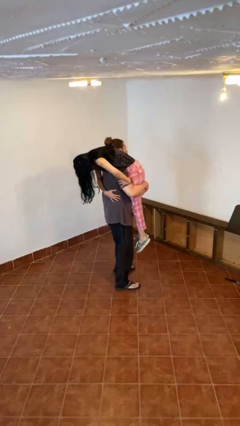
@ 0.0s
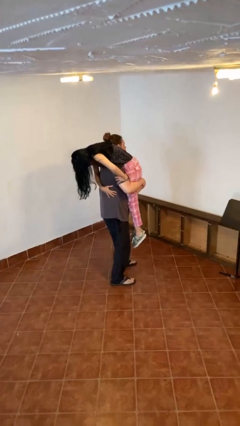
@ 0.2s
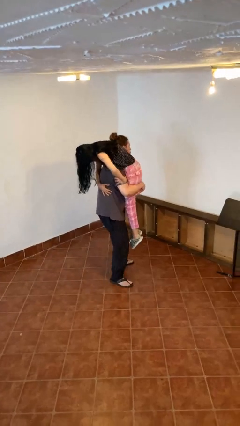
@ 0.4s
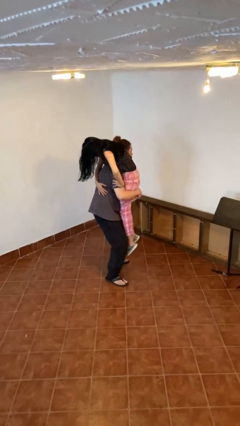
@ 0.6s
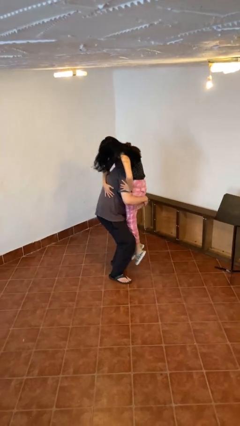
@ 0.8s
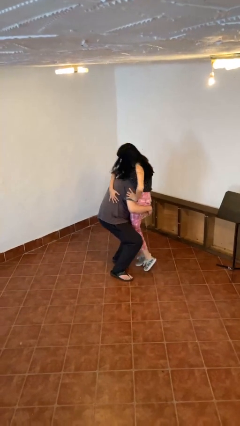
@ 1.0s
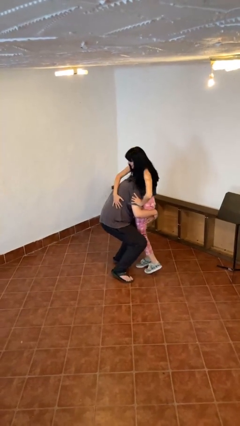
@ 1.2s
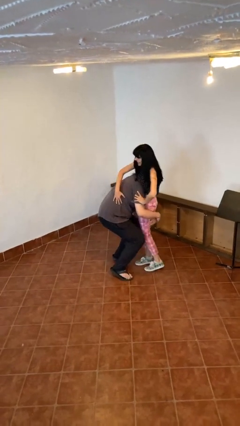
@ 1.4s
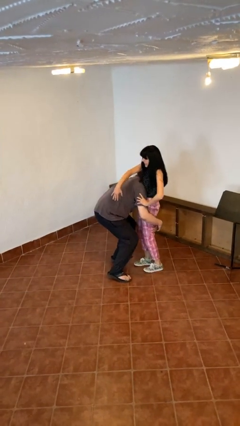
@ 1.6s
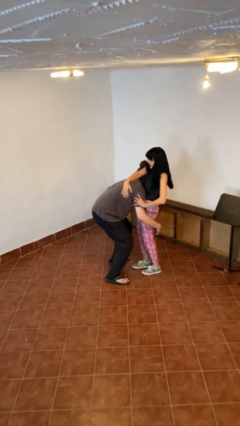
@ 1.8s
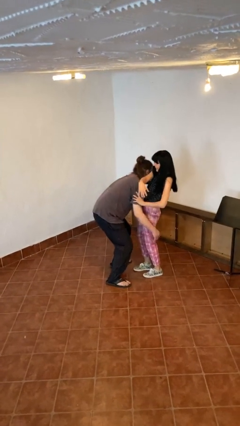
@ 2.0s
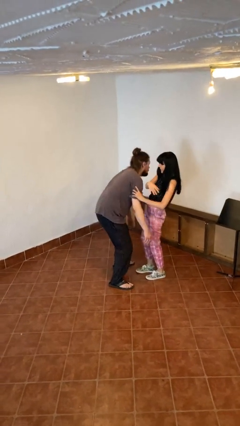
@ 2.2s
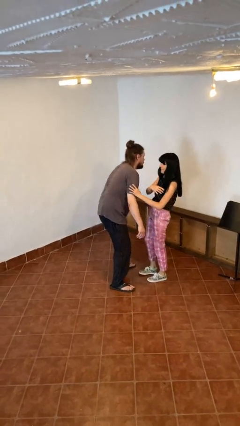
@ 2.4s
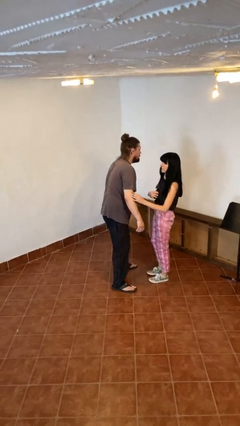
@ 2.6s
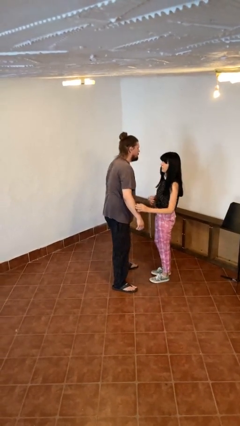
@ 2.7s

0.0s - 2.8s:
person puts down person

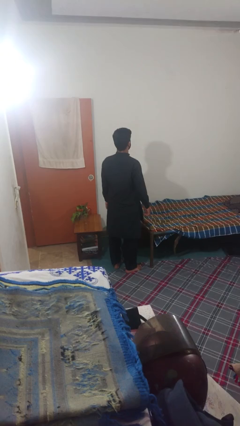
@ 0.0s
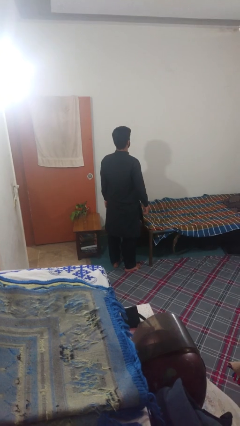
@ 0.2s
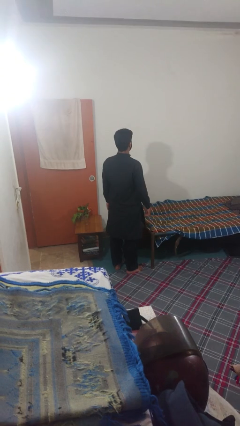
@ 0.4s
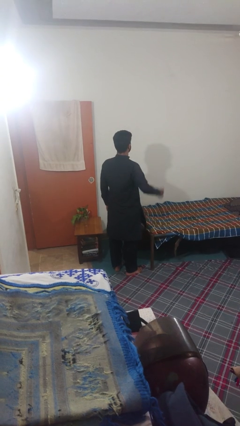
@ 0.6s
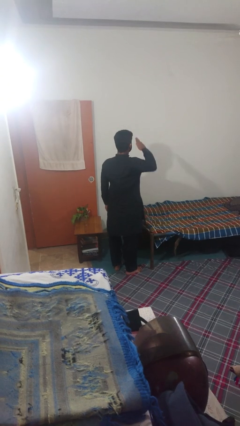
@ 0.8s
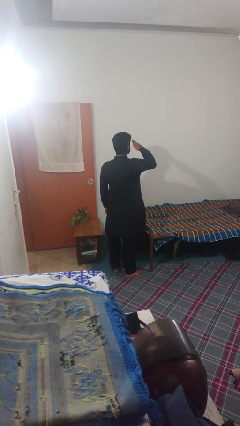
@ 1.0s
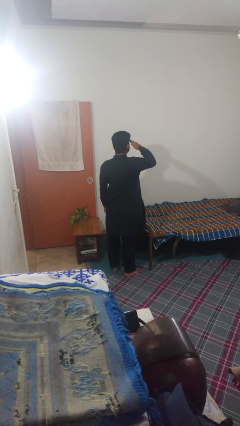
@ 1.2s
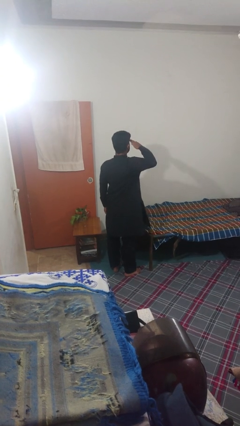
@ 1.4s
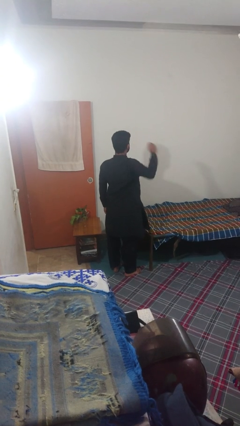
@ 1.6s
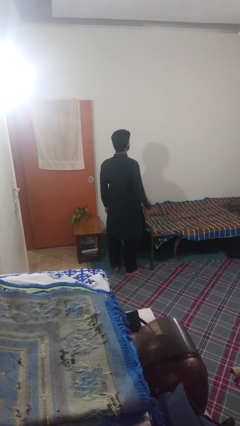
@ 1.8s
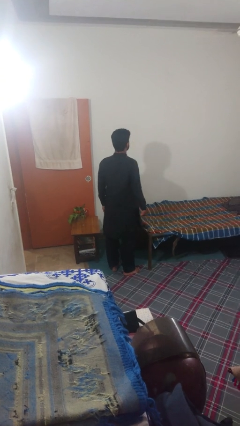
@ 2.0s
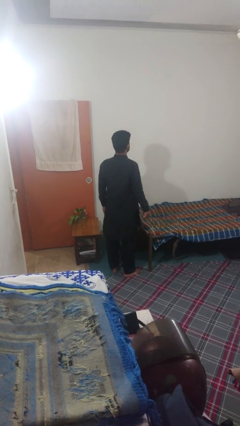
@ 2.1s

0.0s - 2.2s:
person salutes

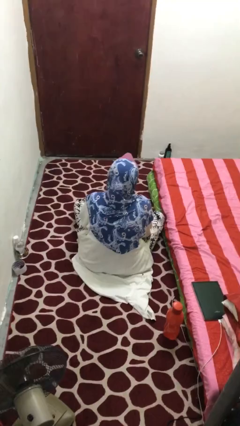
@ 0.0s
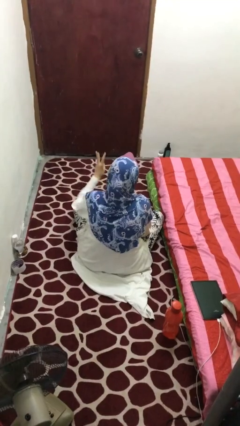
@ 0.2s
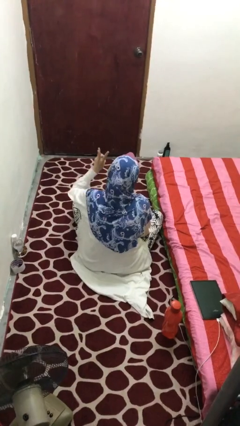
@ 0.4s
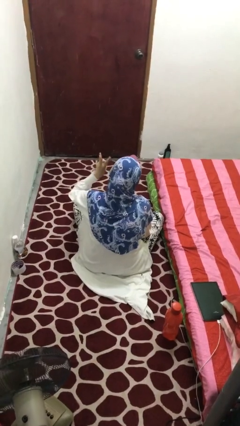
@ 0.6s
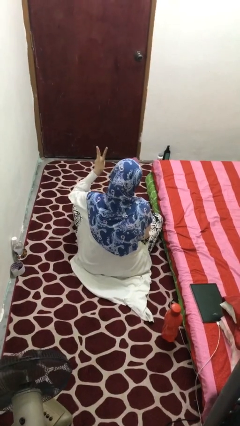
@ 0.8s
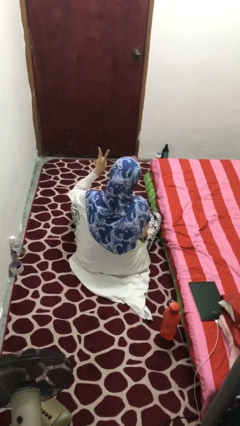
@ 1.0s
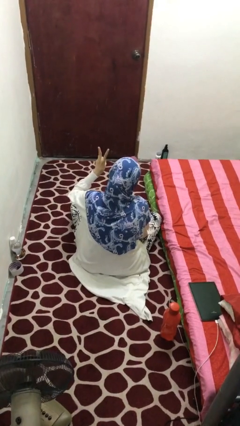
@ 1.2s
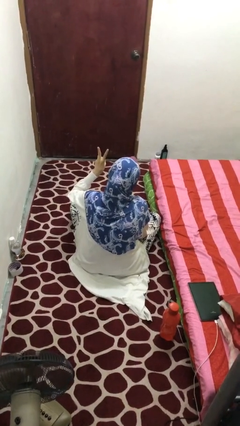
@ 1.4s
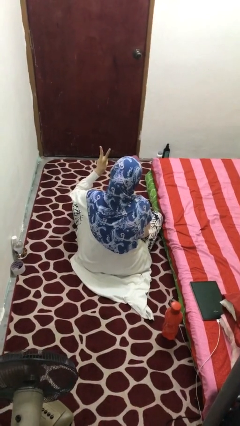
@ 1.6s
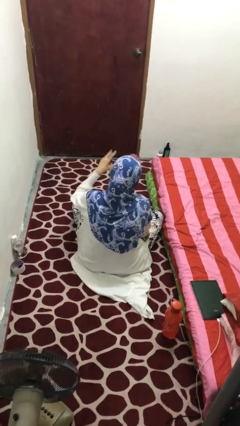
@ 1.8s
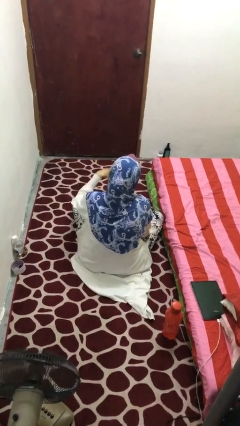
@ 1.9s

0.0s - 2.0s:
person gestures number three

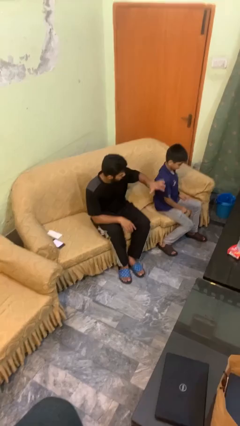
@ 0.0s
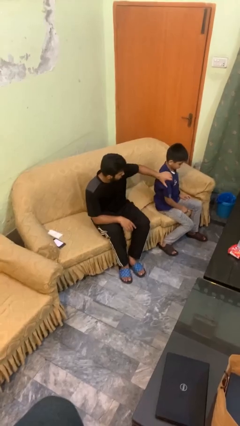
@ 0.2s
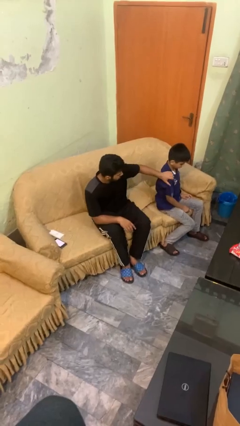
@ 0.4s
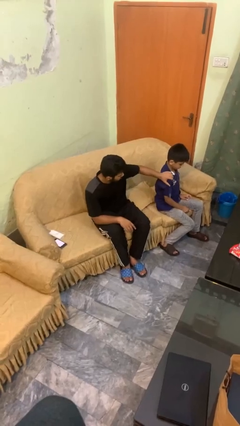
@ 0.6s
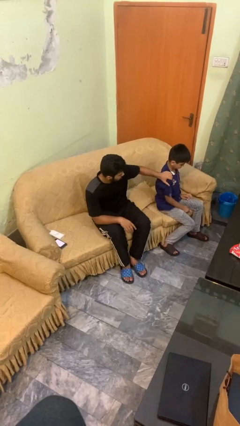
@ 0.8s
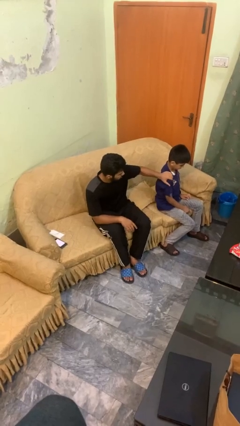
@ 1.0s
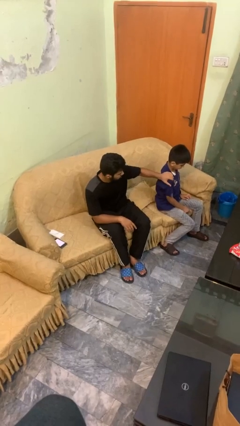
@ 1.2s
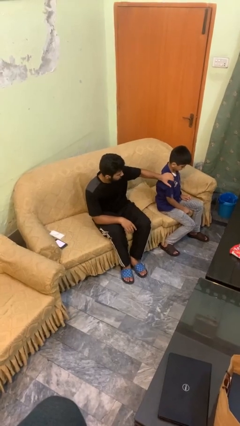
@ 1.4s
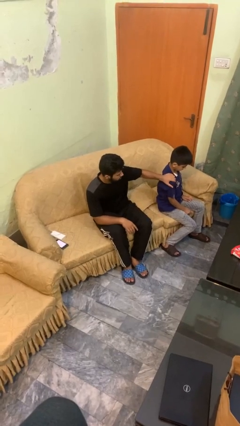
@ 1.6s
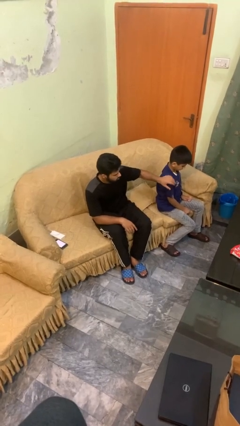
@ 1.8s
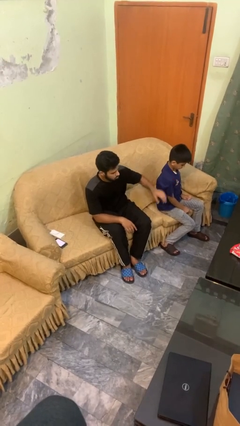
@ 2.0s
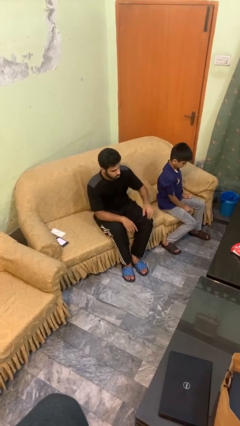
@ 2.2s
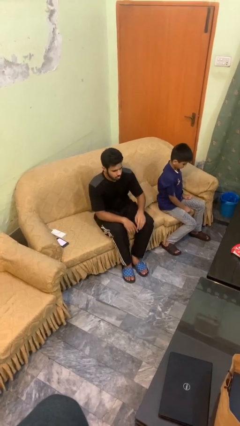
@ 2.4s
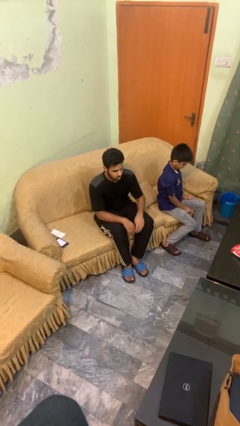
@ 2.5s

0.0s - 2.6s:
person pounds shoulders of person

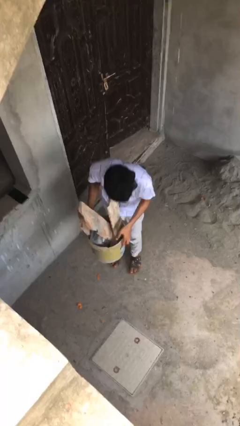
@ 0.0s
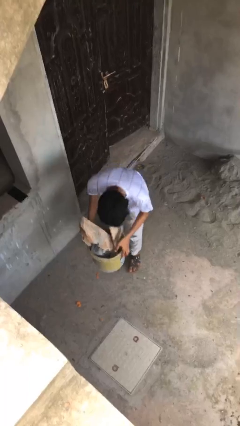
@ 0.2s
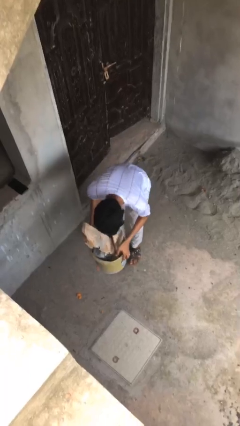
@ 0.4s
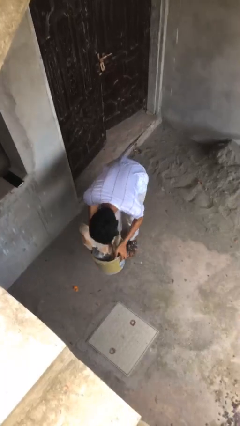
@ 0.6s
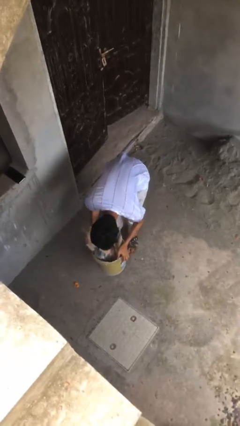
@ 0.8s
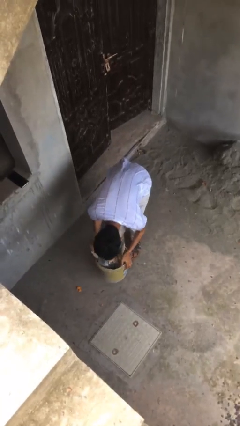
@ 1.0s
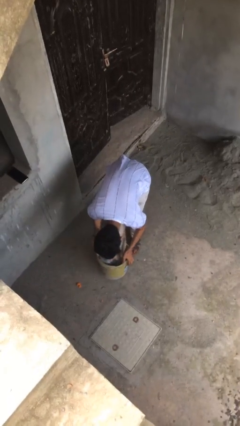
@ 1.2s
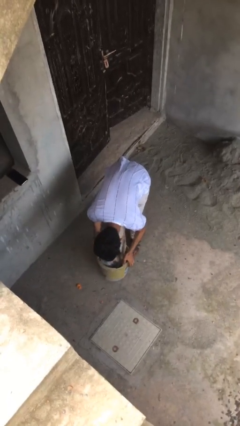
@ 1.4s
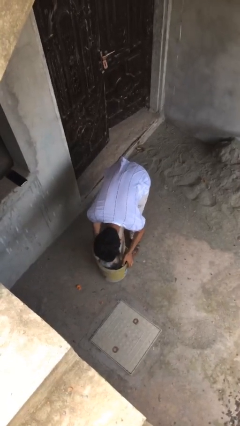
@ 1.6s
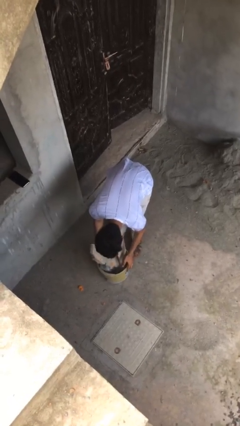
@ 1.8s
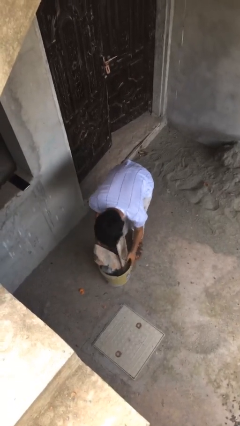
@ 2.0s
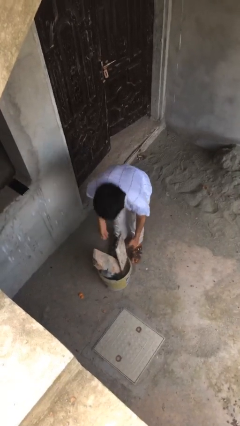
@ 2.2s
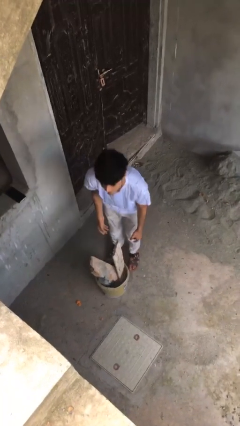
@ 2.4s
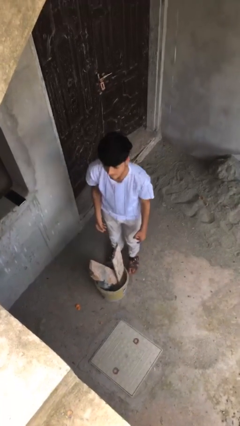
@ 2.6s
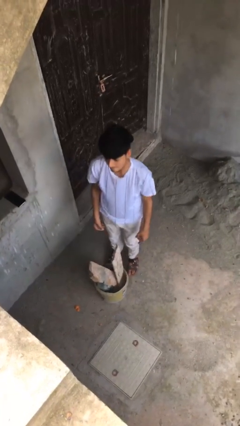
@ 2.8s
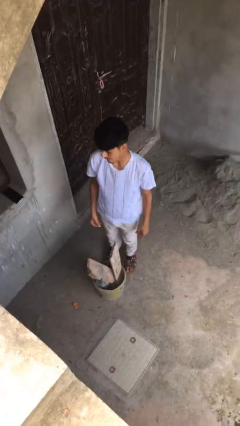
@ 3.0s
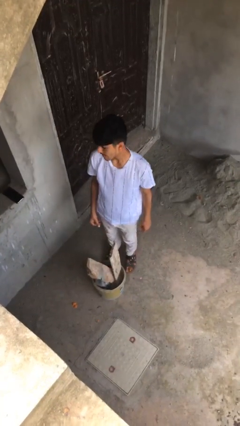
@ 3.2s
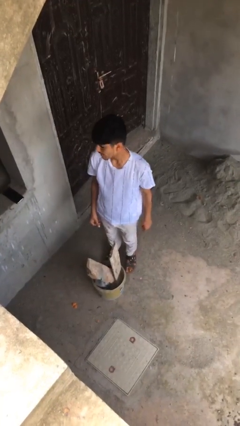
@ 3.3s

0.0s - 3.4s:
person puts down object on floor

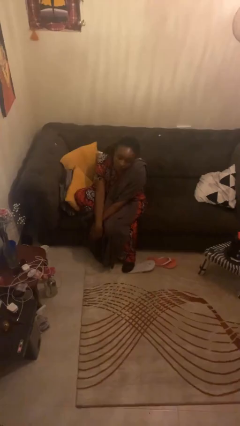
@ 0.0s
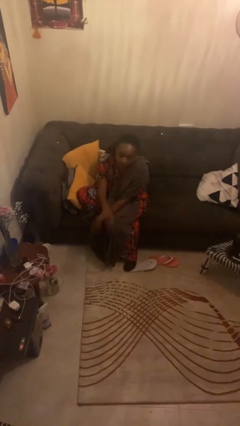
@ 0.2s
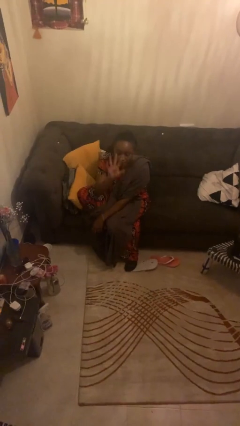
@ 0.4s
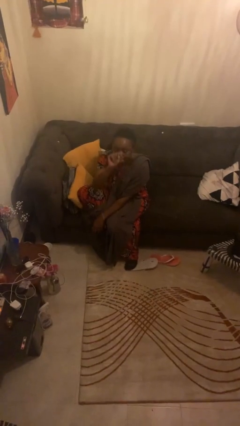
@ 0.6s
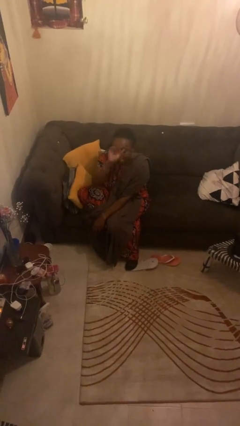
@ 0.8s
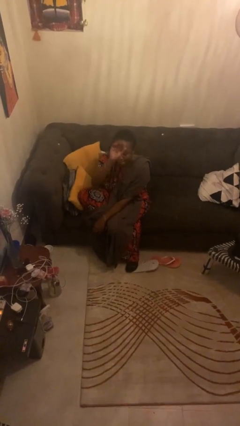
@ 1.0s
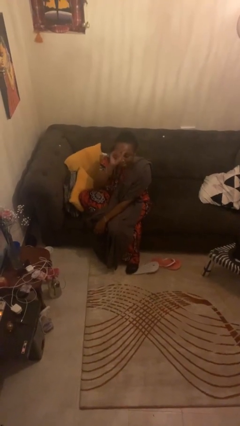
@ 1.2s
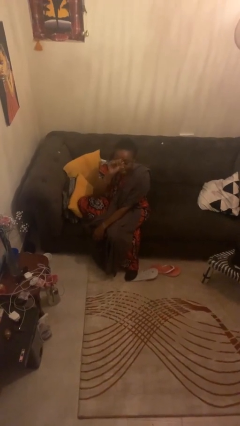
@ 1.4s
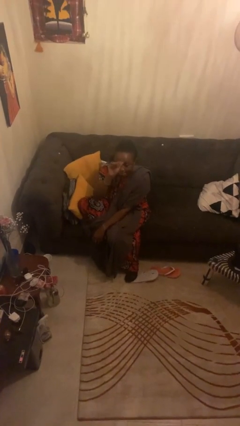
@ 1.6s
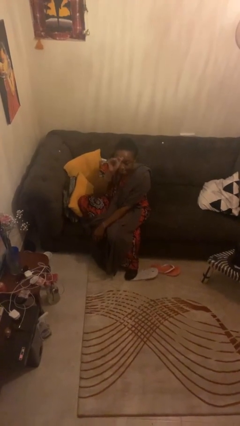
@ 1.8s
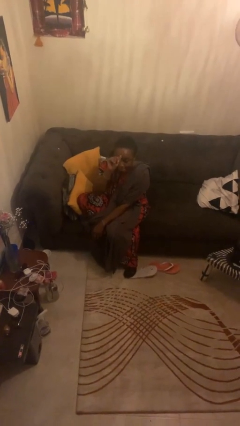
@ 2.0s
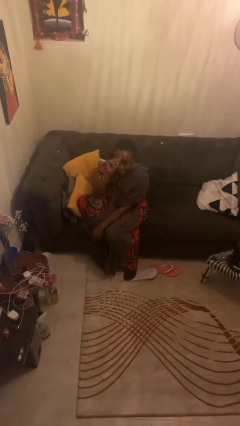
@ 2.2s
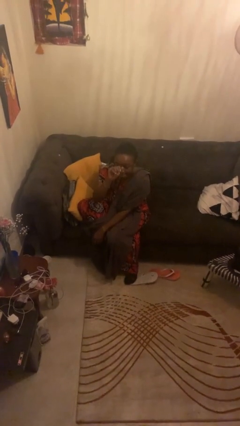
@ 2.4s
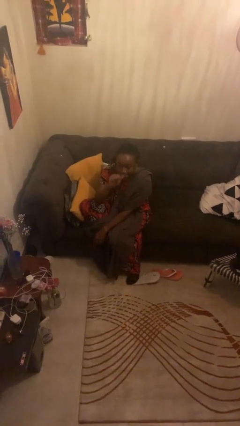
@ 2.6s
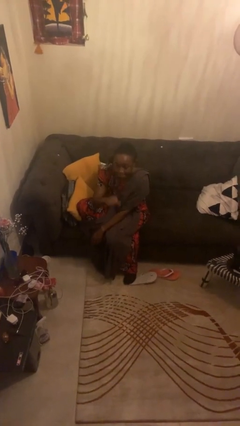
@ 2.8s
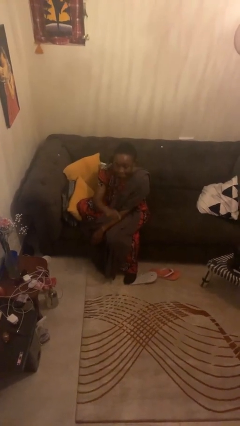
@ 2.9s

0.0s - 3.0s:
person gestures come here

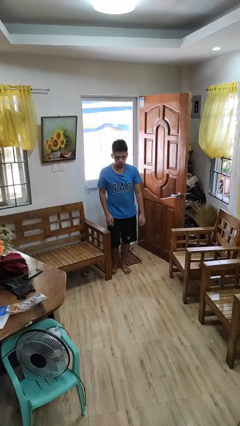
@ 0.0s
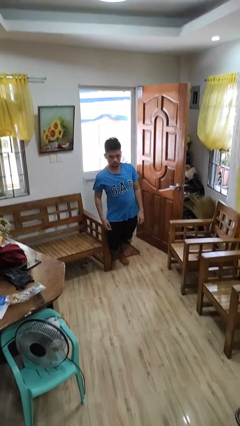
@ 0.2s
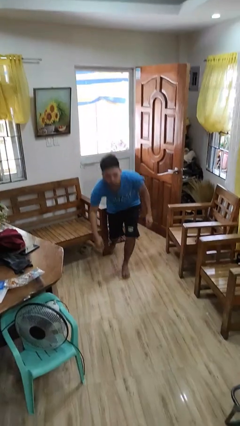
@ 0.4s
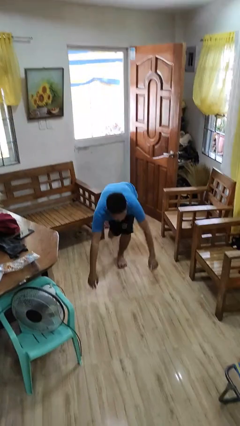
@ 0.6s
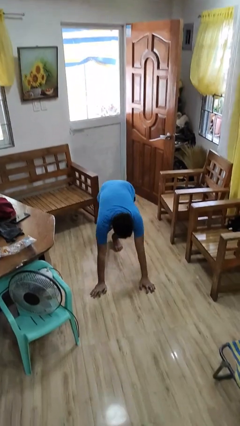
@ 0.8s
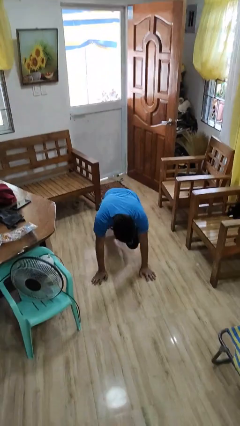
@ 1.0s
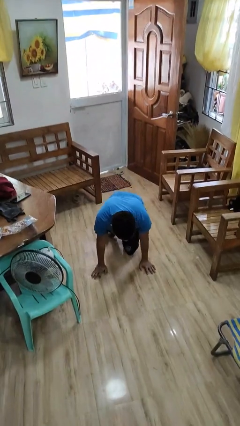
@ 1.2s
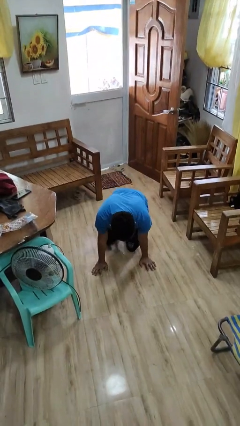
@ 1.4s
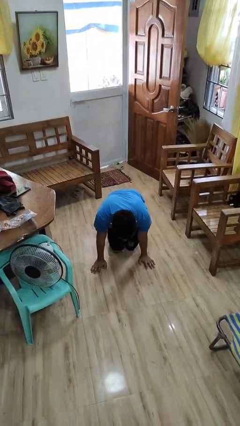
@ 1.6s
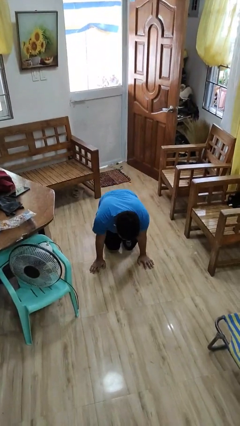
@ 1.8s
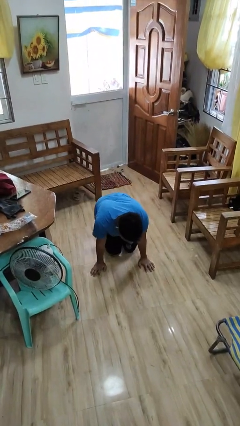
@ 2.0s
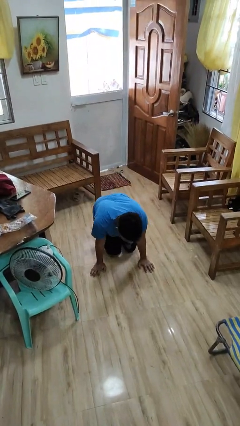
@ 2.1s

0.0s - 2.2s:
person trips on object on floor
